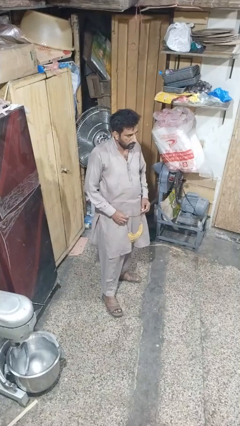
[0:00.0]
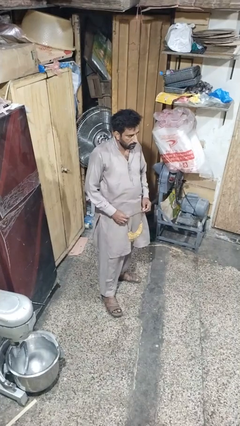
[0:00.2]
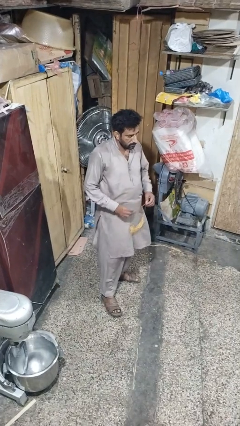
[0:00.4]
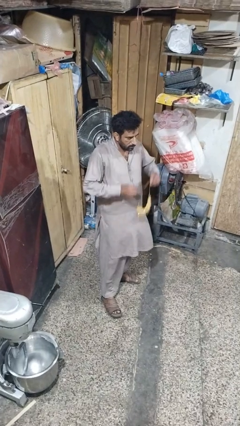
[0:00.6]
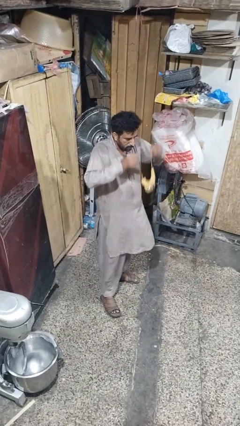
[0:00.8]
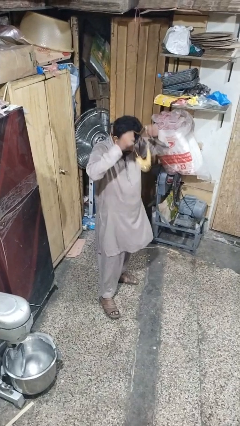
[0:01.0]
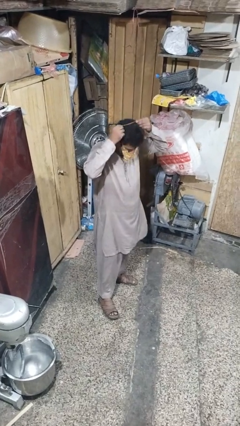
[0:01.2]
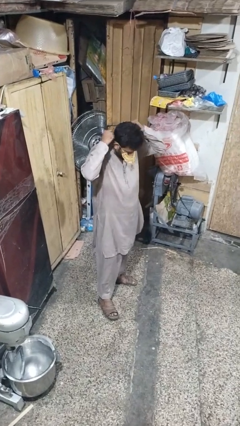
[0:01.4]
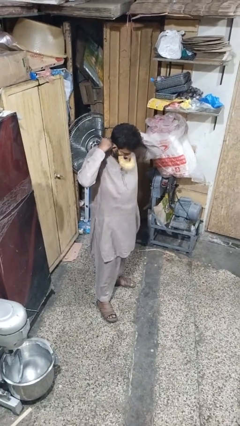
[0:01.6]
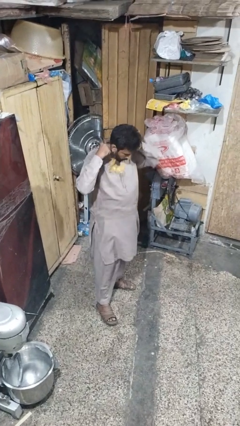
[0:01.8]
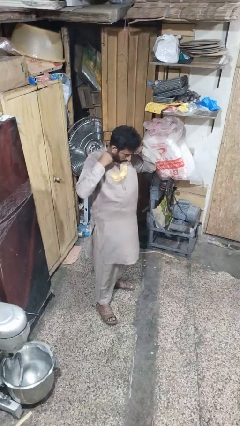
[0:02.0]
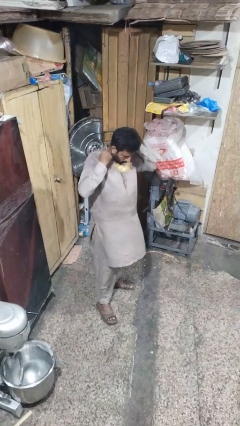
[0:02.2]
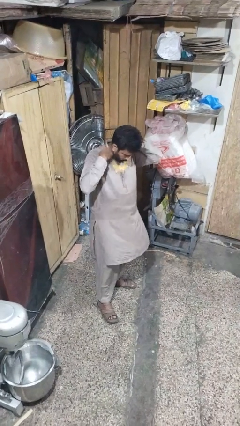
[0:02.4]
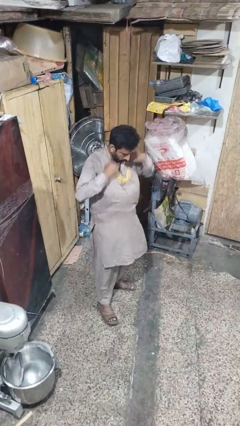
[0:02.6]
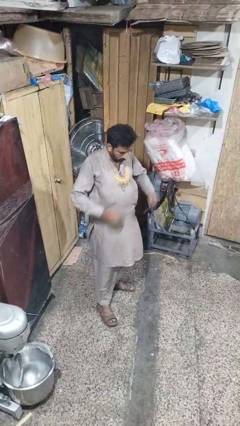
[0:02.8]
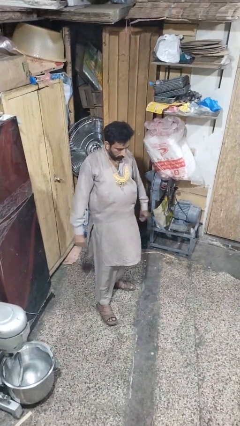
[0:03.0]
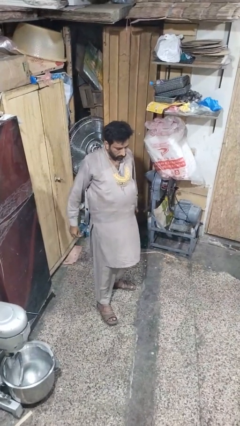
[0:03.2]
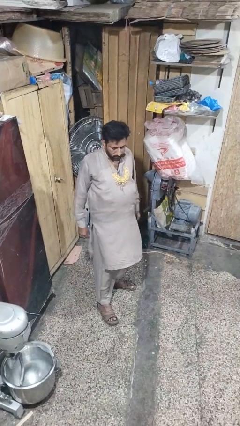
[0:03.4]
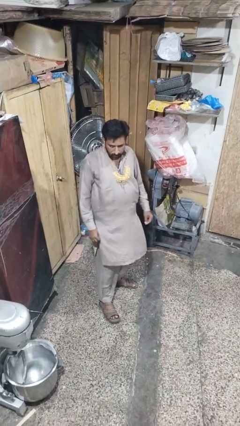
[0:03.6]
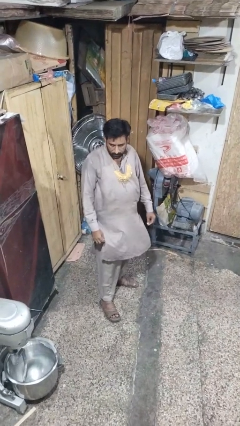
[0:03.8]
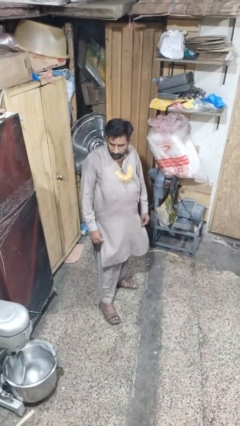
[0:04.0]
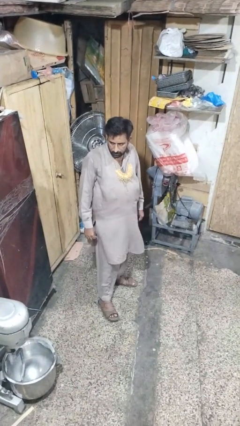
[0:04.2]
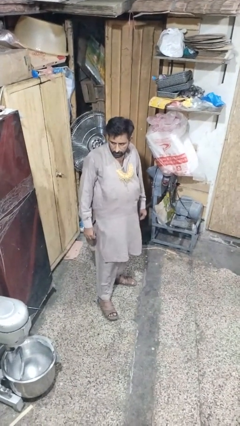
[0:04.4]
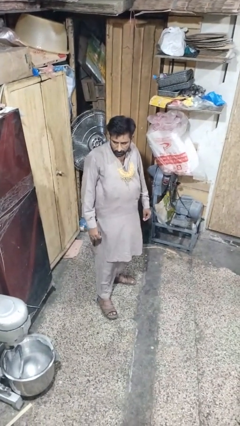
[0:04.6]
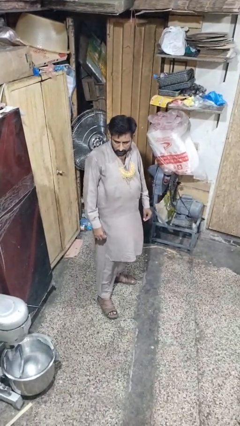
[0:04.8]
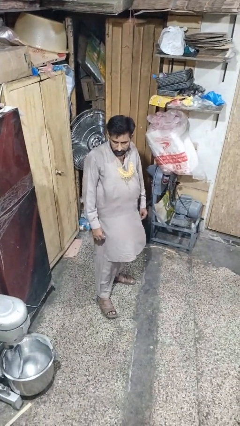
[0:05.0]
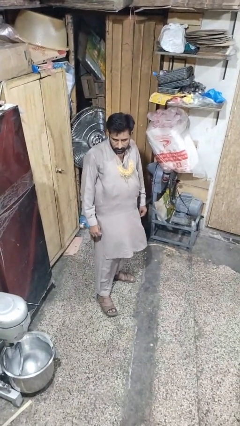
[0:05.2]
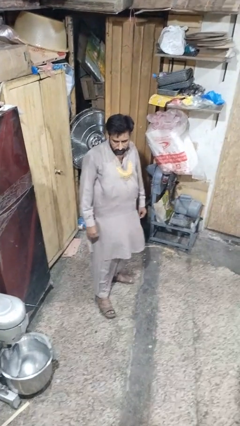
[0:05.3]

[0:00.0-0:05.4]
person puts on necklace

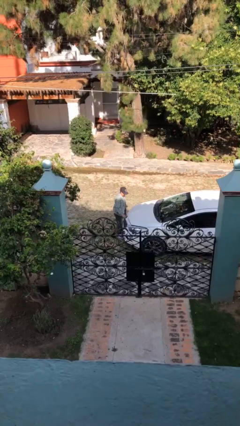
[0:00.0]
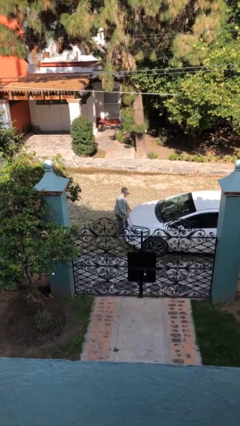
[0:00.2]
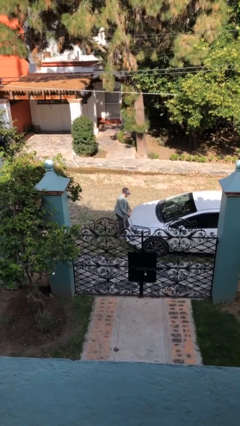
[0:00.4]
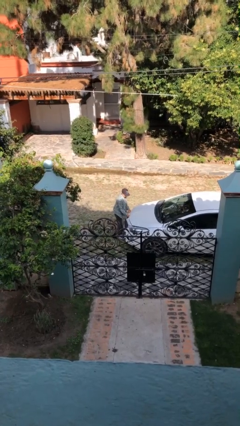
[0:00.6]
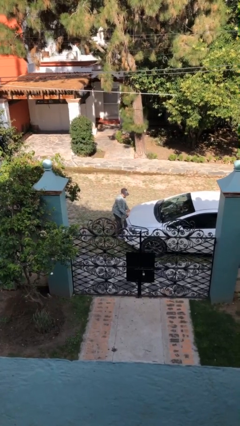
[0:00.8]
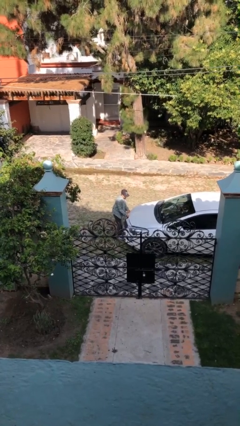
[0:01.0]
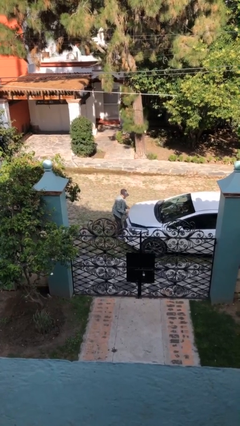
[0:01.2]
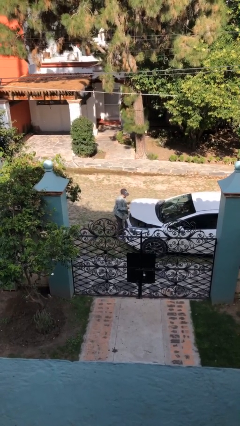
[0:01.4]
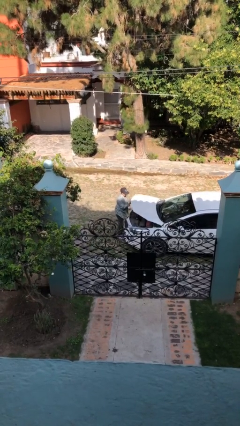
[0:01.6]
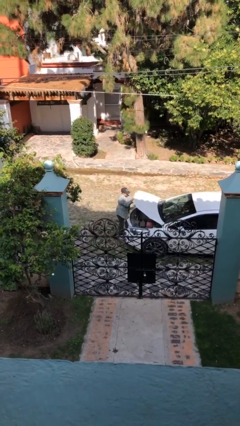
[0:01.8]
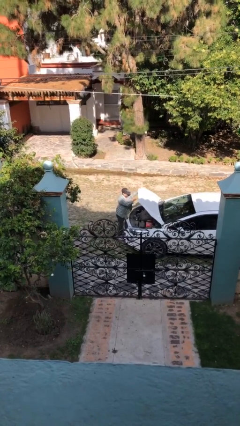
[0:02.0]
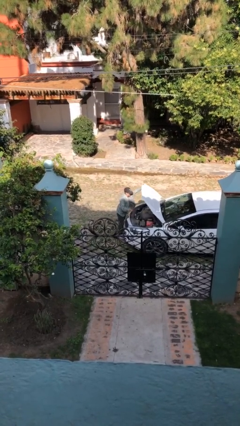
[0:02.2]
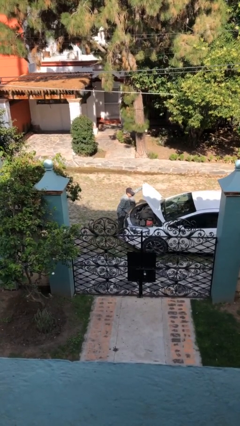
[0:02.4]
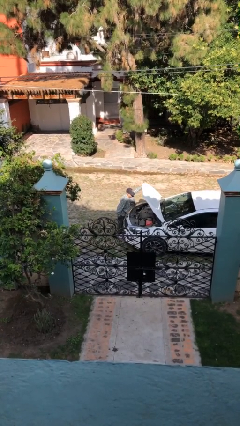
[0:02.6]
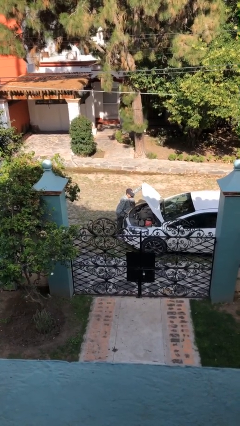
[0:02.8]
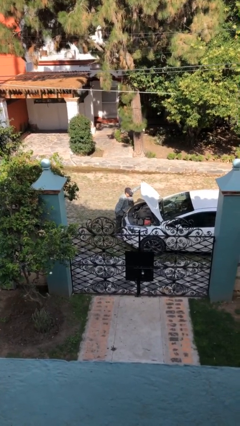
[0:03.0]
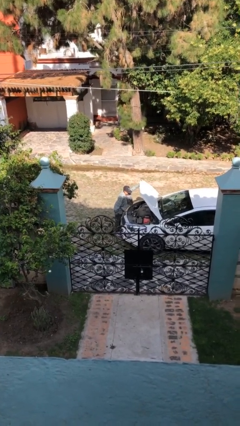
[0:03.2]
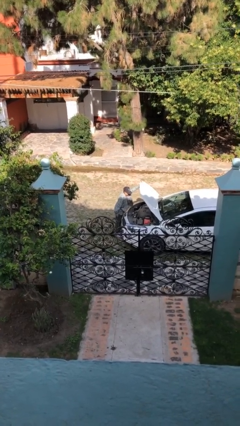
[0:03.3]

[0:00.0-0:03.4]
person opens car hood

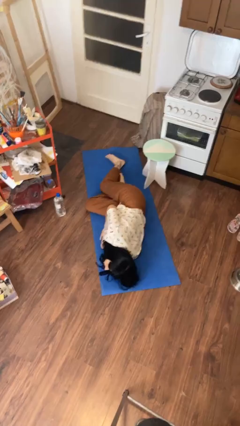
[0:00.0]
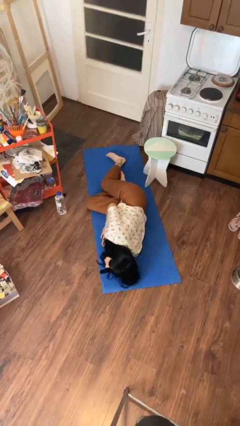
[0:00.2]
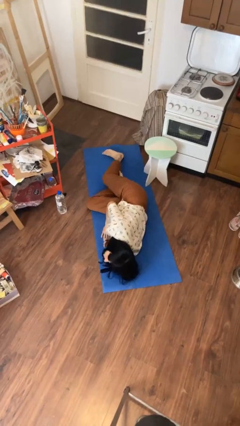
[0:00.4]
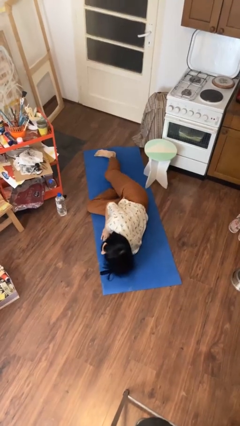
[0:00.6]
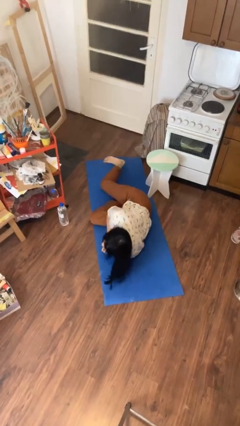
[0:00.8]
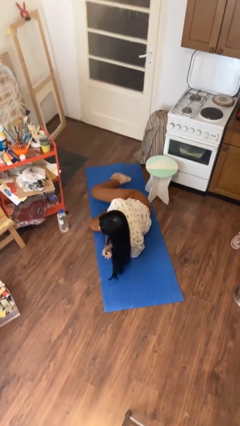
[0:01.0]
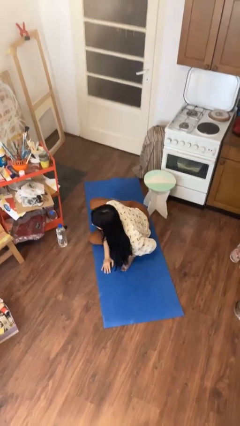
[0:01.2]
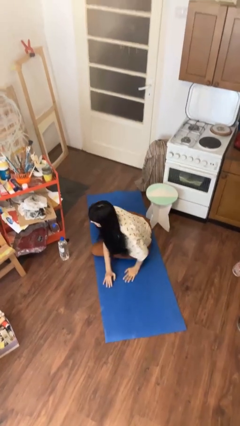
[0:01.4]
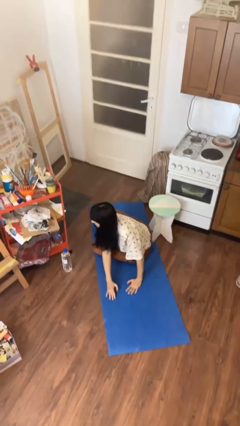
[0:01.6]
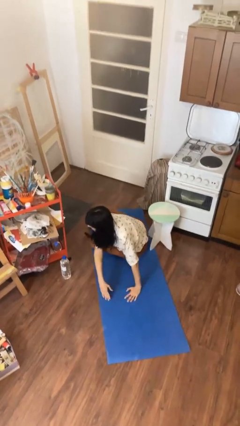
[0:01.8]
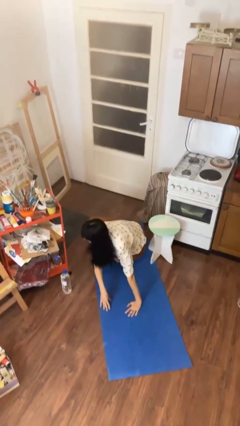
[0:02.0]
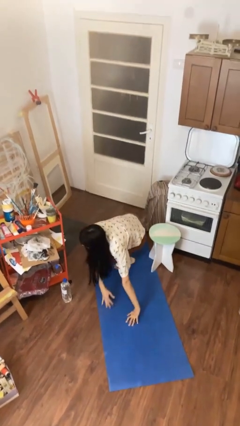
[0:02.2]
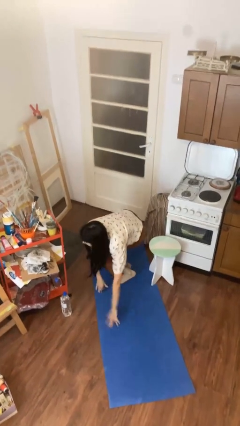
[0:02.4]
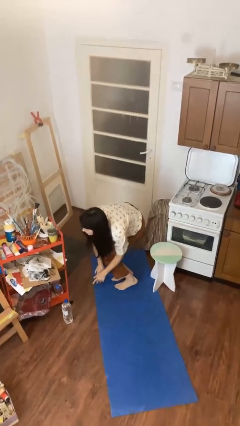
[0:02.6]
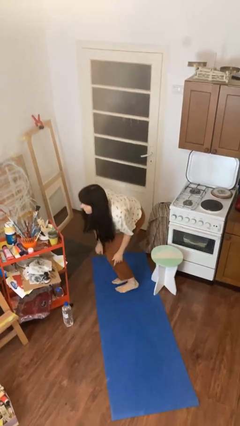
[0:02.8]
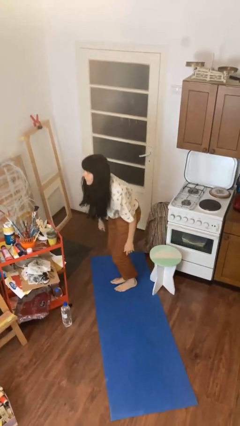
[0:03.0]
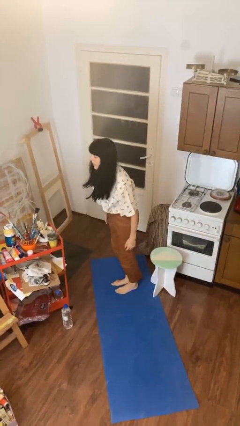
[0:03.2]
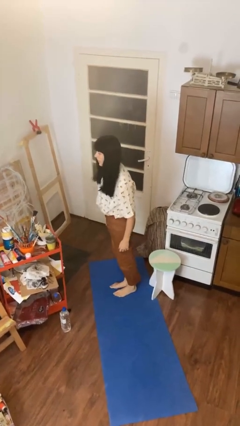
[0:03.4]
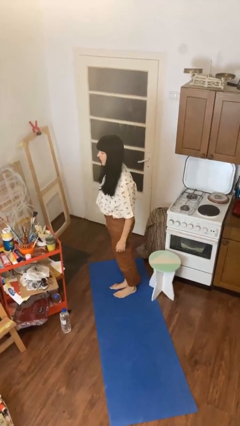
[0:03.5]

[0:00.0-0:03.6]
person stands up from floor

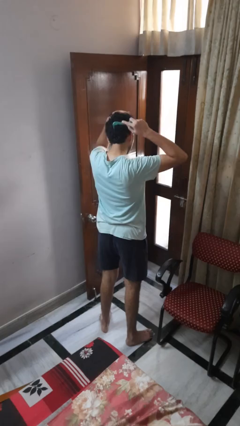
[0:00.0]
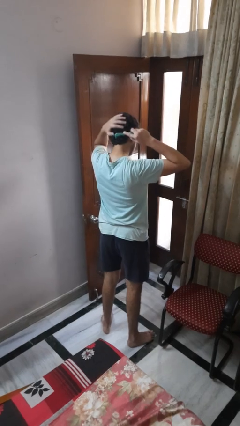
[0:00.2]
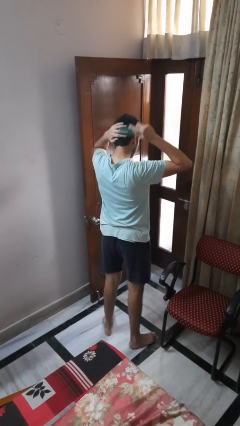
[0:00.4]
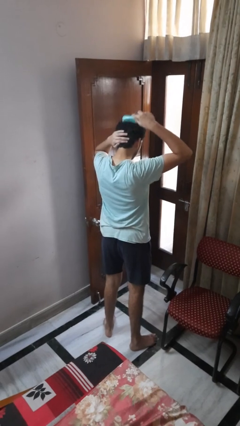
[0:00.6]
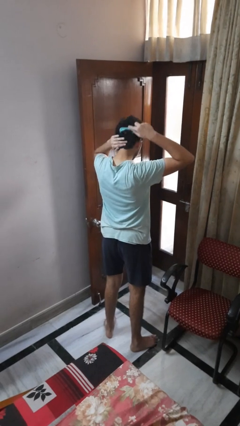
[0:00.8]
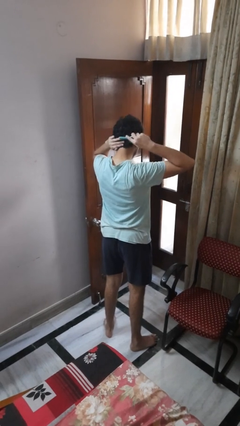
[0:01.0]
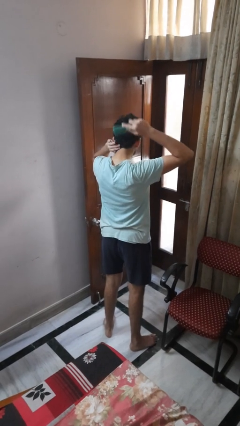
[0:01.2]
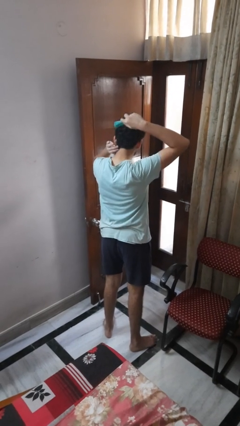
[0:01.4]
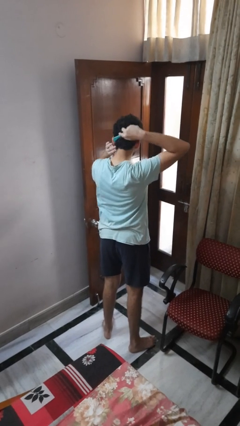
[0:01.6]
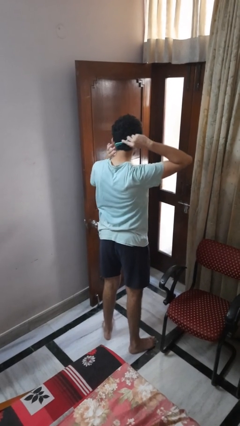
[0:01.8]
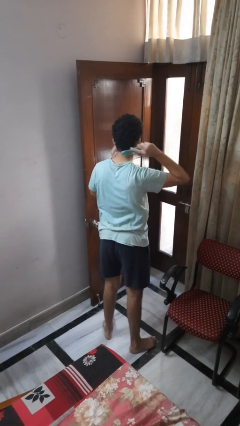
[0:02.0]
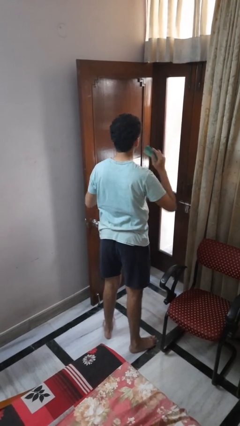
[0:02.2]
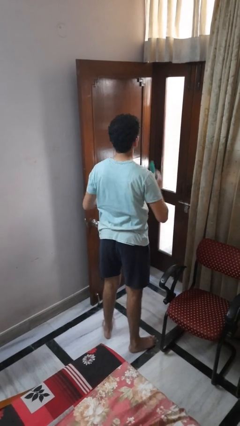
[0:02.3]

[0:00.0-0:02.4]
person brushes hair

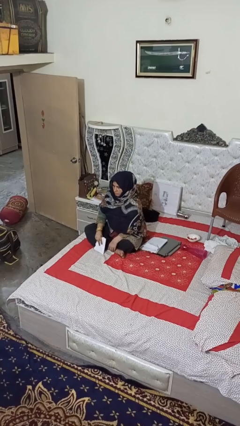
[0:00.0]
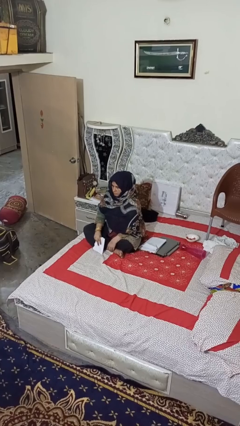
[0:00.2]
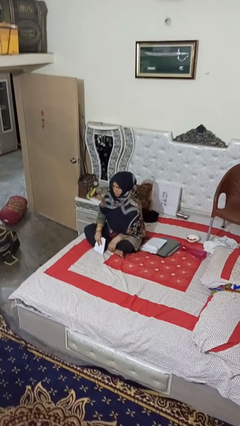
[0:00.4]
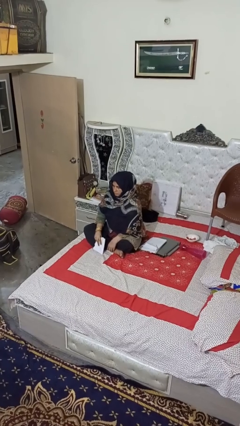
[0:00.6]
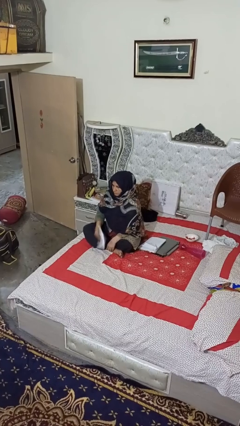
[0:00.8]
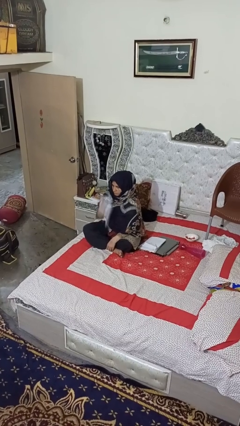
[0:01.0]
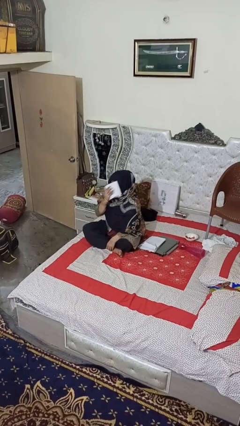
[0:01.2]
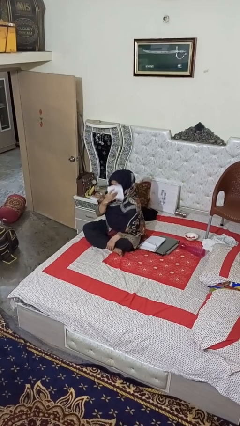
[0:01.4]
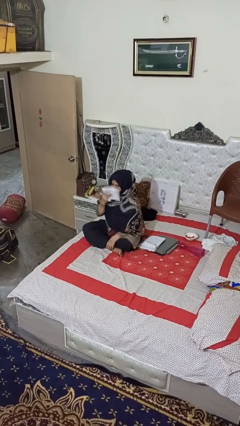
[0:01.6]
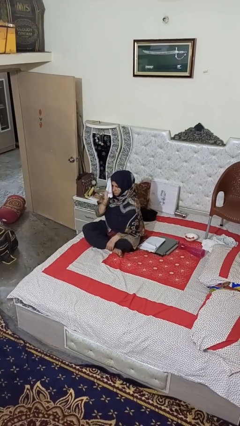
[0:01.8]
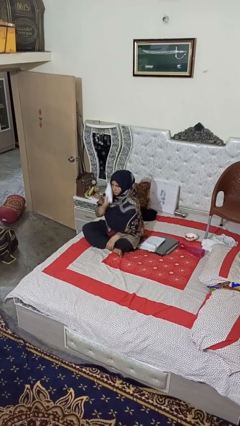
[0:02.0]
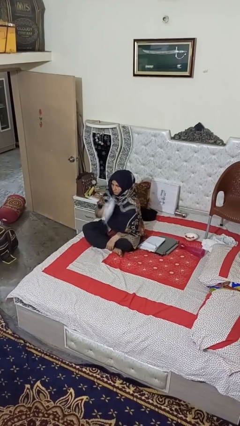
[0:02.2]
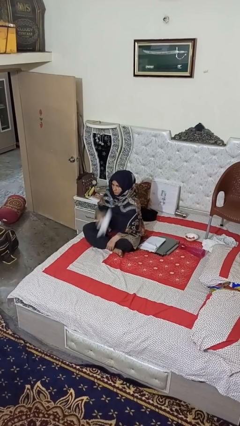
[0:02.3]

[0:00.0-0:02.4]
person wipes mouth with napkin

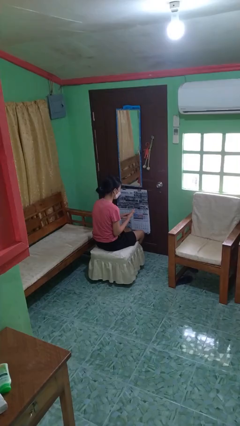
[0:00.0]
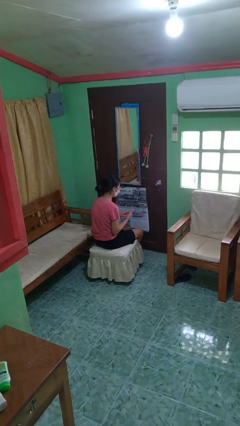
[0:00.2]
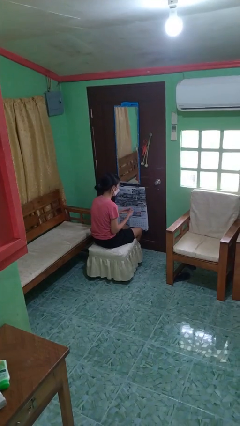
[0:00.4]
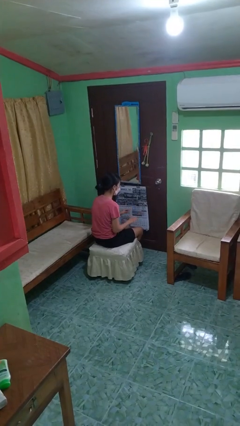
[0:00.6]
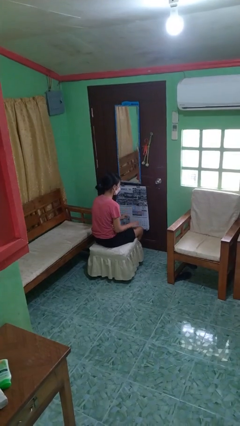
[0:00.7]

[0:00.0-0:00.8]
person takes off ring
